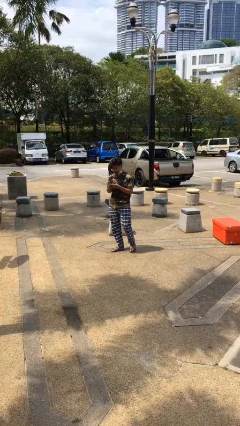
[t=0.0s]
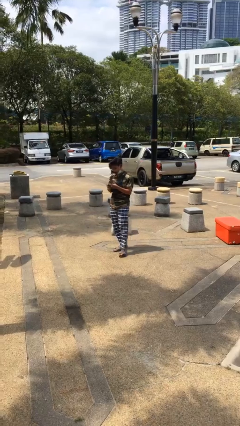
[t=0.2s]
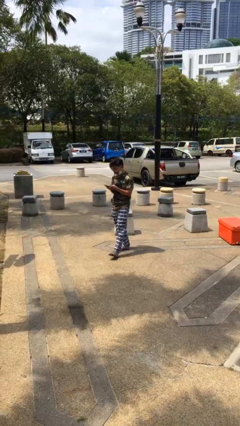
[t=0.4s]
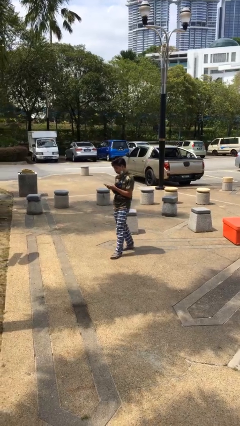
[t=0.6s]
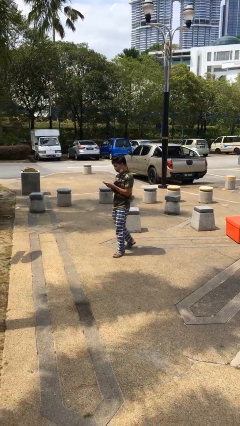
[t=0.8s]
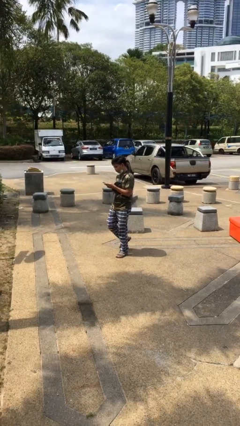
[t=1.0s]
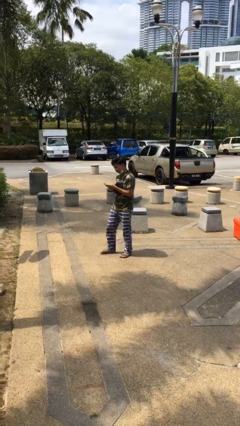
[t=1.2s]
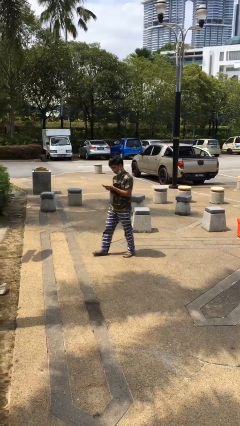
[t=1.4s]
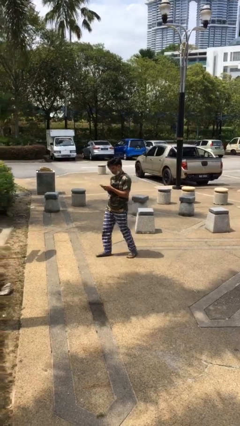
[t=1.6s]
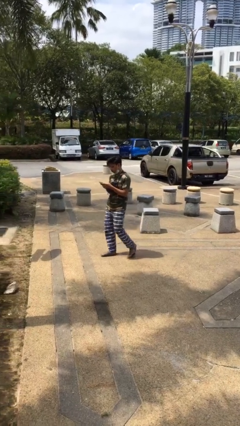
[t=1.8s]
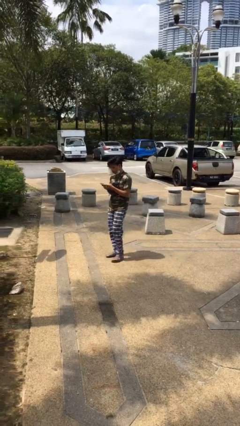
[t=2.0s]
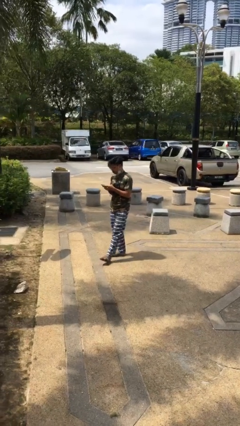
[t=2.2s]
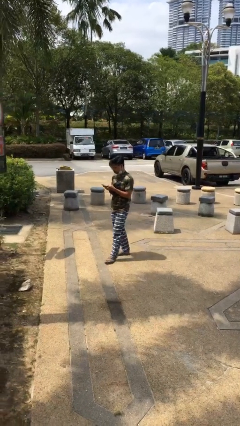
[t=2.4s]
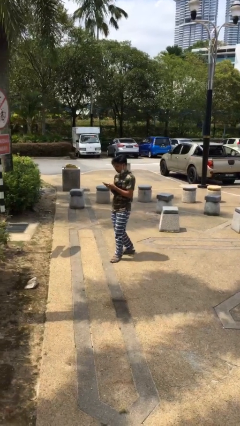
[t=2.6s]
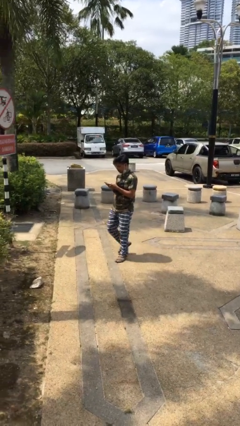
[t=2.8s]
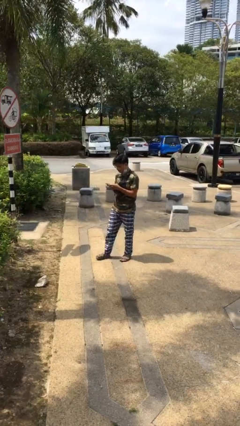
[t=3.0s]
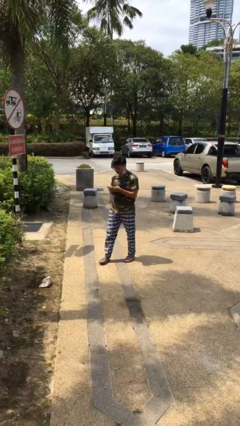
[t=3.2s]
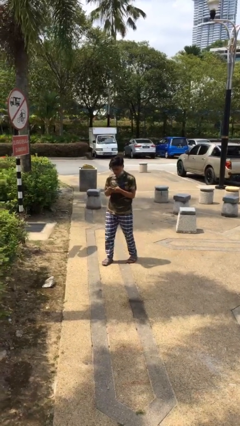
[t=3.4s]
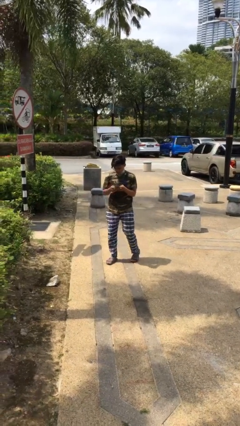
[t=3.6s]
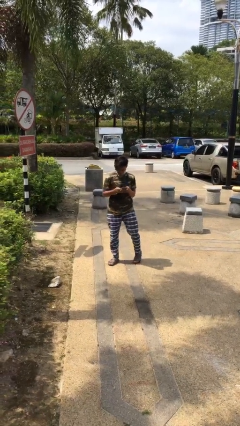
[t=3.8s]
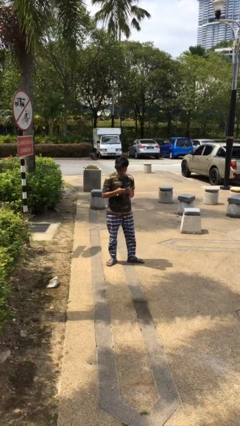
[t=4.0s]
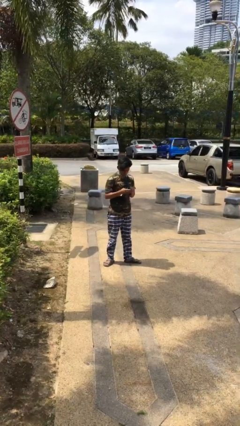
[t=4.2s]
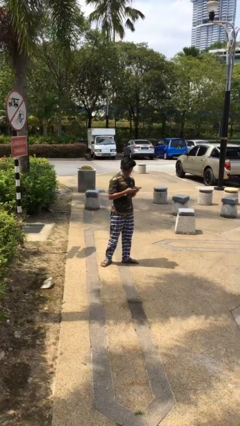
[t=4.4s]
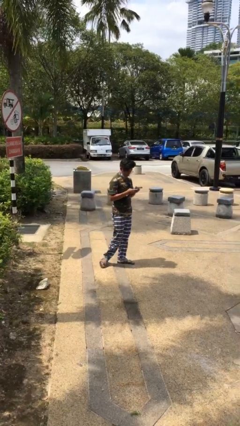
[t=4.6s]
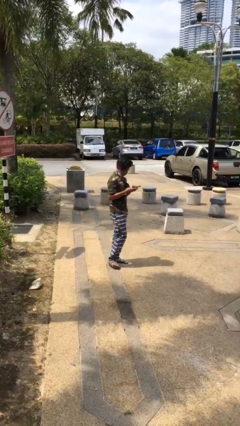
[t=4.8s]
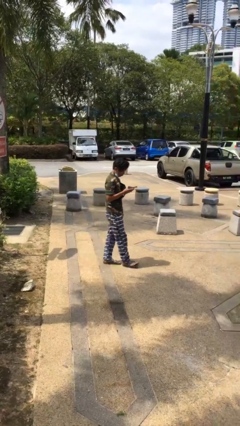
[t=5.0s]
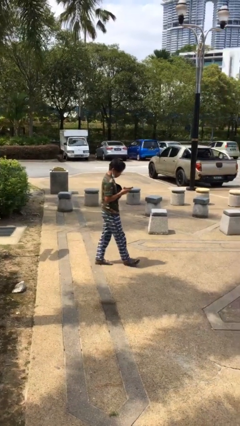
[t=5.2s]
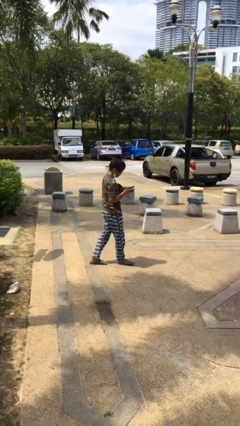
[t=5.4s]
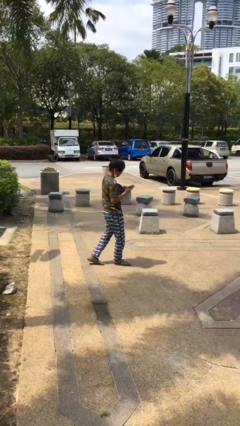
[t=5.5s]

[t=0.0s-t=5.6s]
person texts on phone

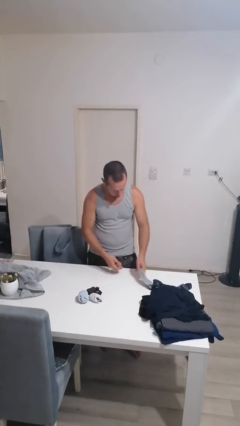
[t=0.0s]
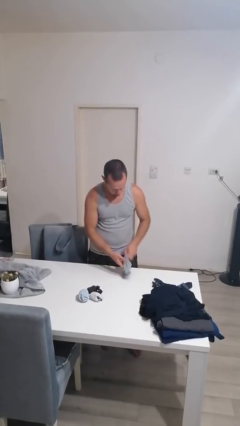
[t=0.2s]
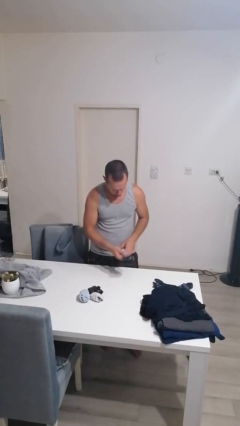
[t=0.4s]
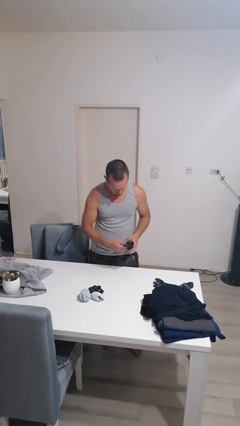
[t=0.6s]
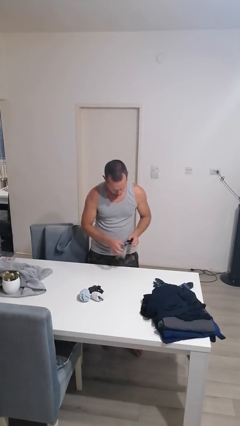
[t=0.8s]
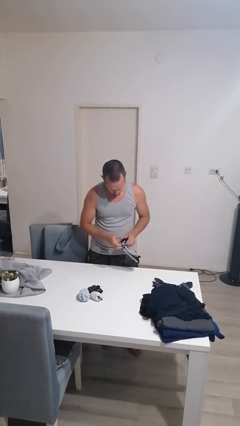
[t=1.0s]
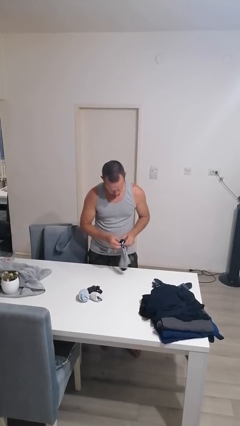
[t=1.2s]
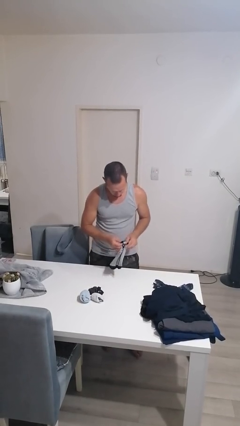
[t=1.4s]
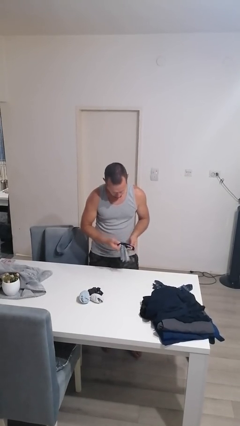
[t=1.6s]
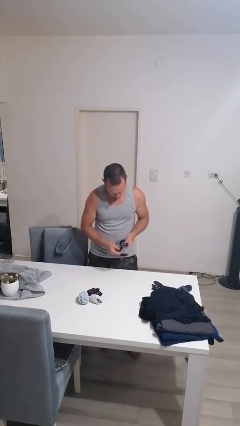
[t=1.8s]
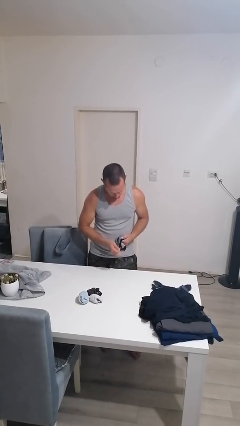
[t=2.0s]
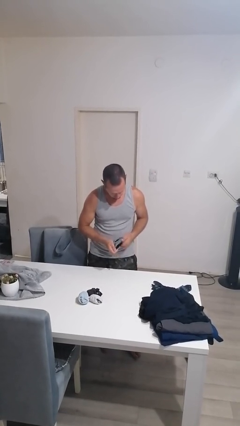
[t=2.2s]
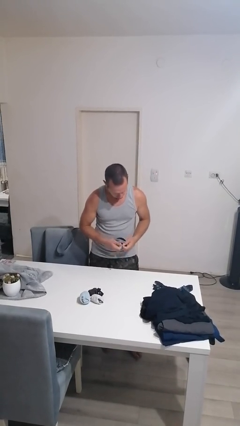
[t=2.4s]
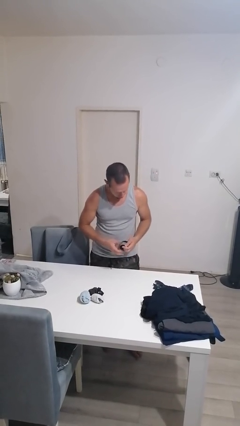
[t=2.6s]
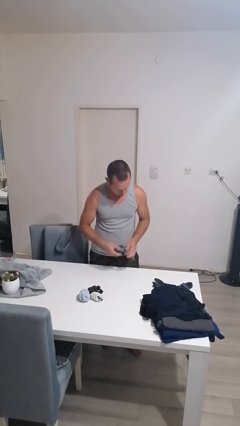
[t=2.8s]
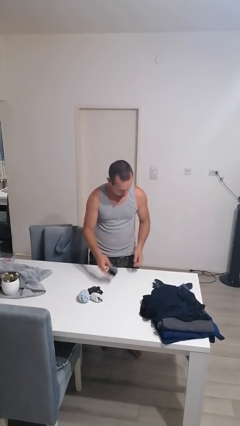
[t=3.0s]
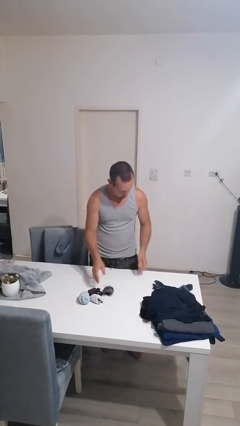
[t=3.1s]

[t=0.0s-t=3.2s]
person folds socks

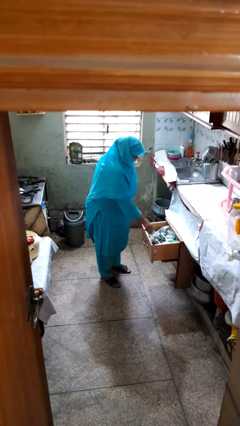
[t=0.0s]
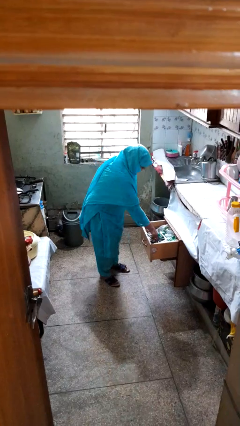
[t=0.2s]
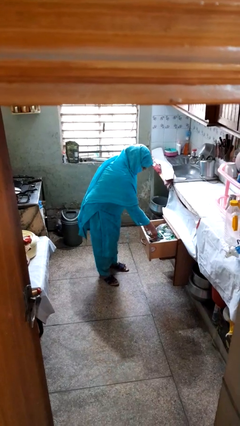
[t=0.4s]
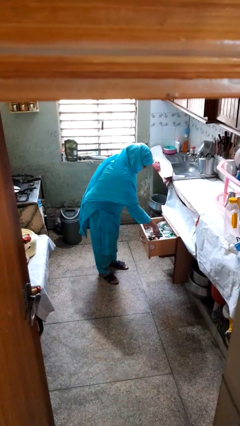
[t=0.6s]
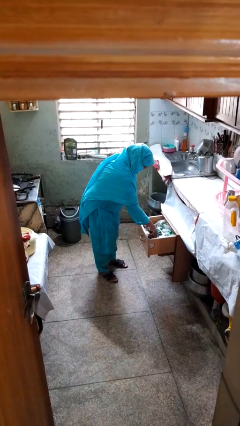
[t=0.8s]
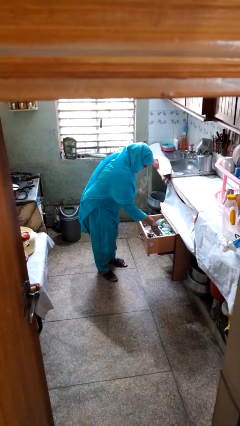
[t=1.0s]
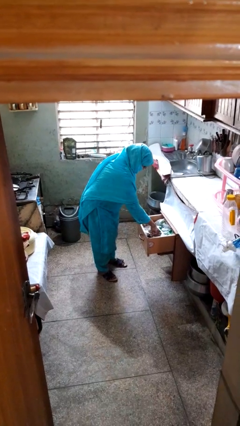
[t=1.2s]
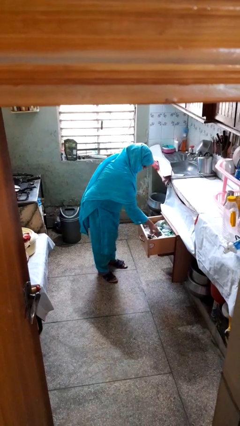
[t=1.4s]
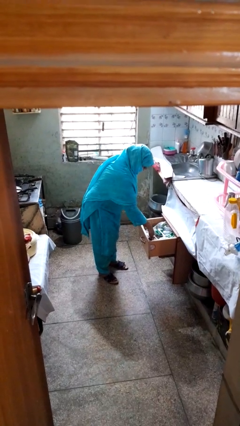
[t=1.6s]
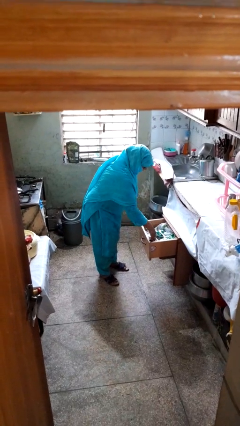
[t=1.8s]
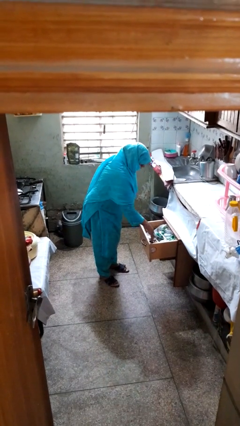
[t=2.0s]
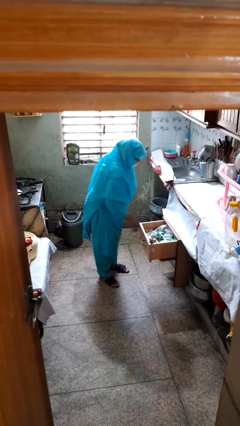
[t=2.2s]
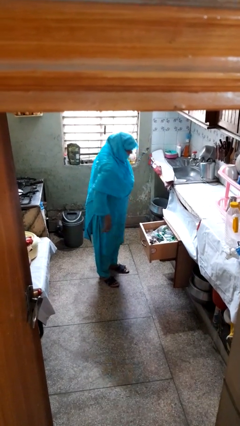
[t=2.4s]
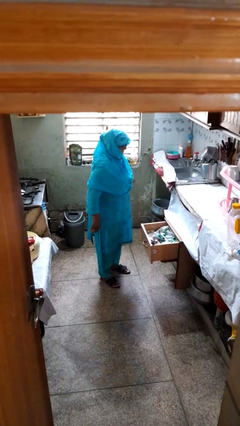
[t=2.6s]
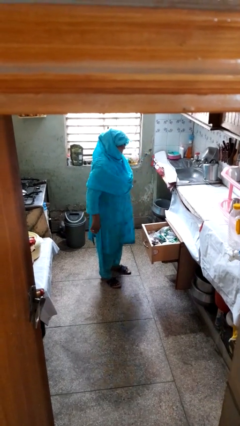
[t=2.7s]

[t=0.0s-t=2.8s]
person searches in kitchen drawer

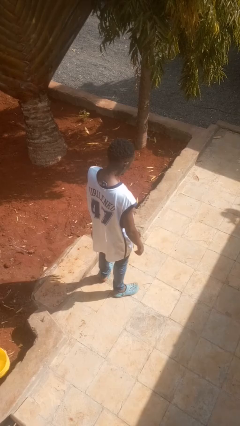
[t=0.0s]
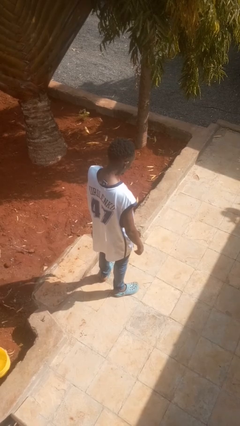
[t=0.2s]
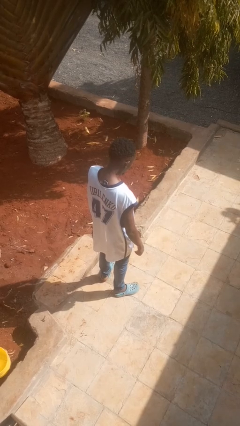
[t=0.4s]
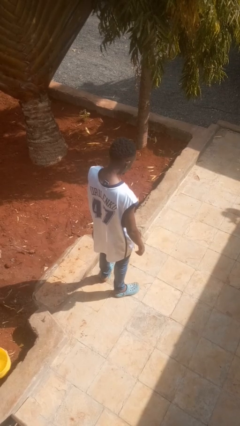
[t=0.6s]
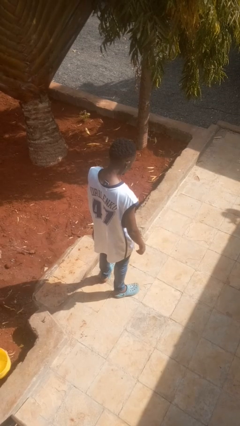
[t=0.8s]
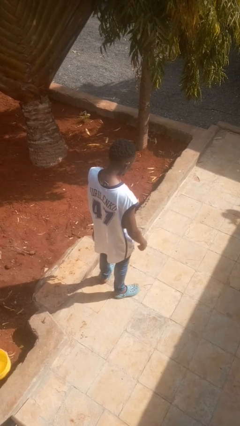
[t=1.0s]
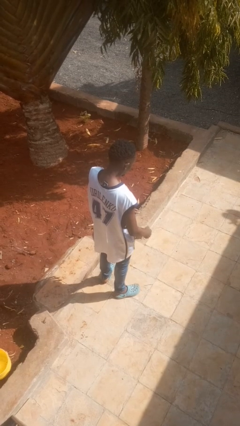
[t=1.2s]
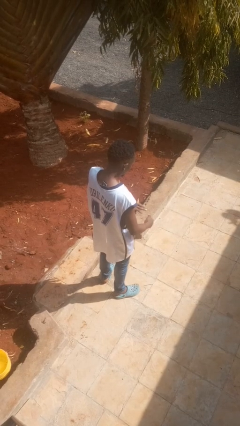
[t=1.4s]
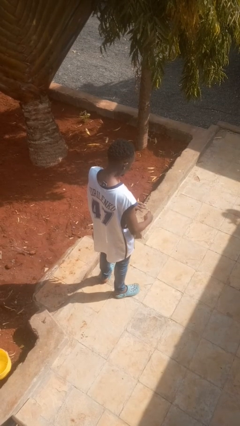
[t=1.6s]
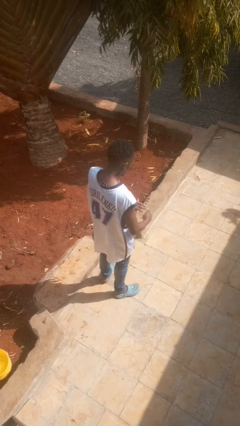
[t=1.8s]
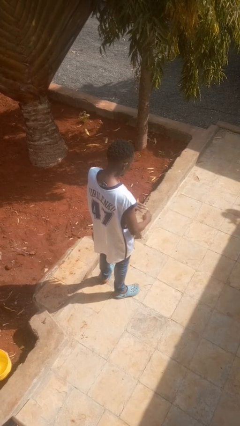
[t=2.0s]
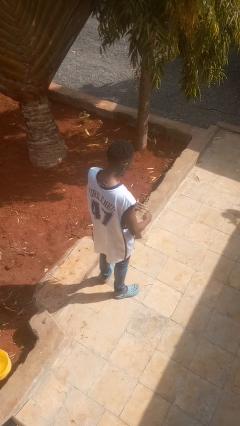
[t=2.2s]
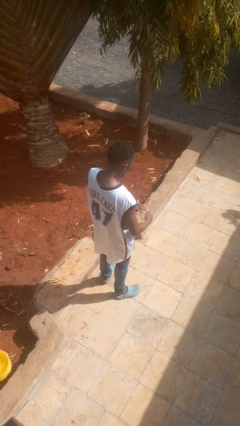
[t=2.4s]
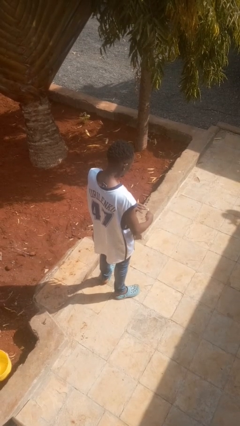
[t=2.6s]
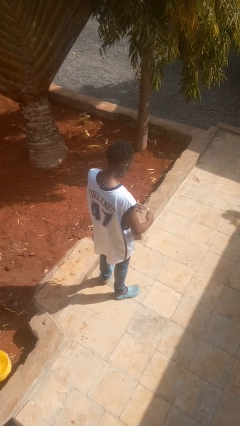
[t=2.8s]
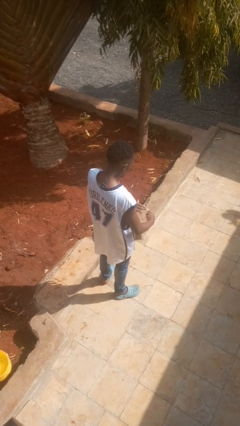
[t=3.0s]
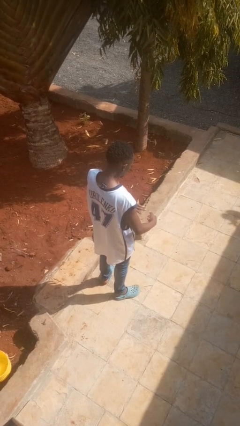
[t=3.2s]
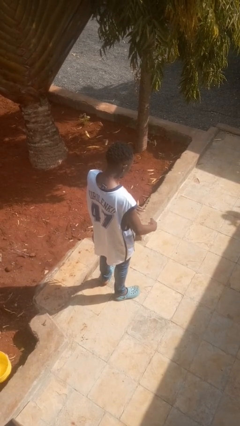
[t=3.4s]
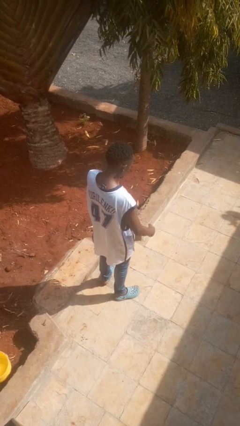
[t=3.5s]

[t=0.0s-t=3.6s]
person clips fingernails

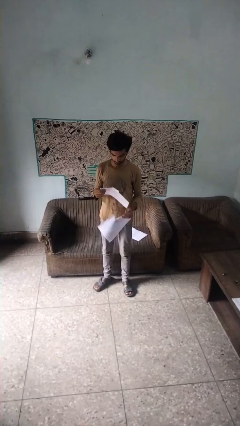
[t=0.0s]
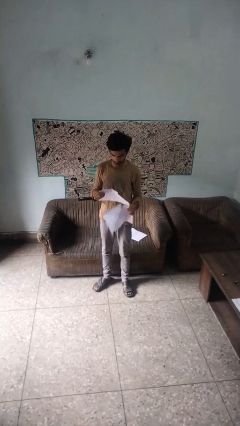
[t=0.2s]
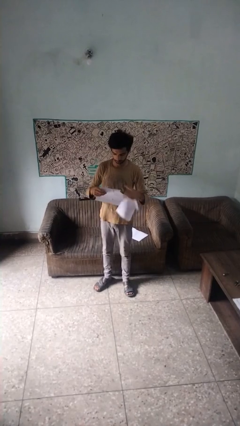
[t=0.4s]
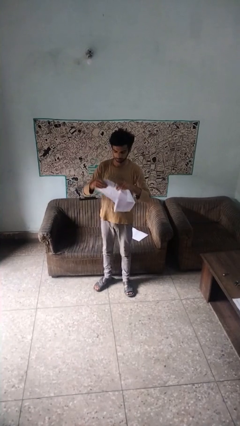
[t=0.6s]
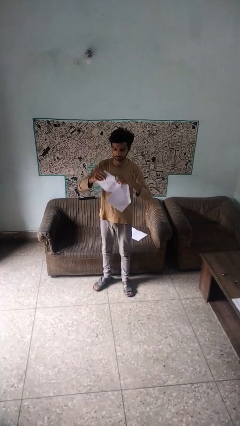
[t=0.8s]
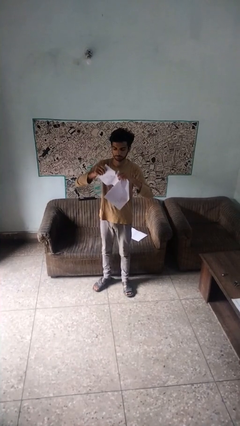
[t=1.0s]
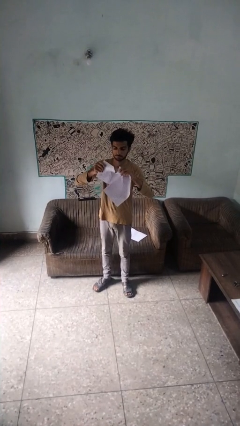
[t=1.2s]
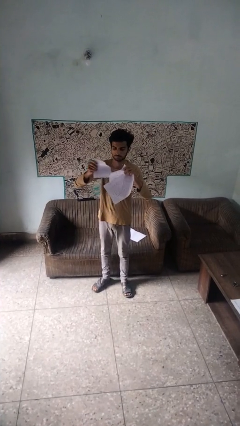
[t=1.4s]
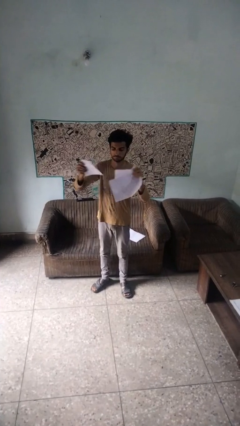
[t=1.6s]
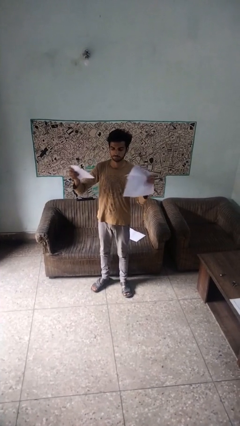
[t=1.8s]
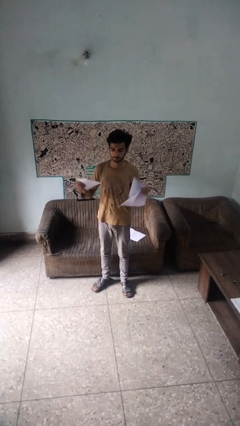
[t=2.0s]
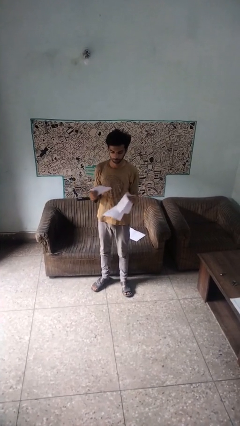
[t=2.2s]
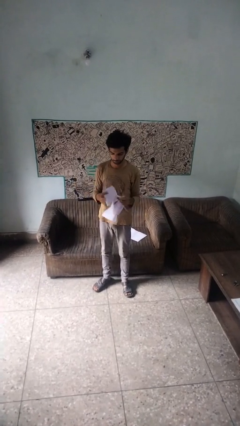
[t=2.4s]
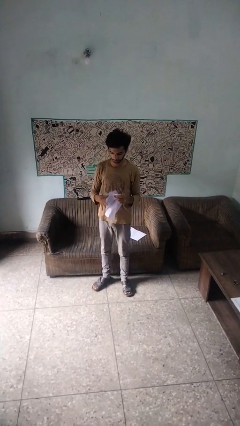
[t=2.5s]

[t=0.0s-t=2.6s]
person tears paper
